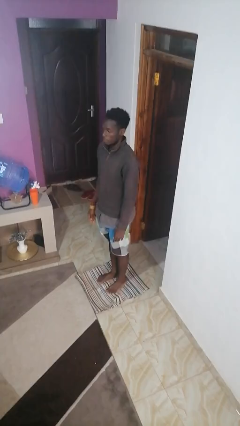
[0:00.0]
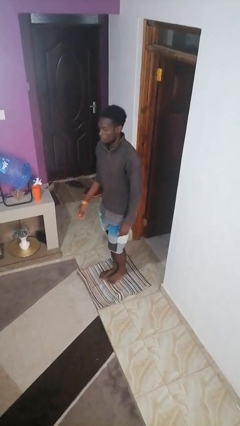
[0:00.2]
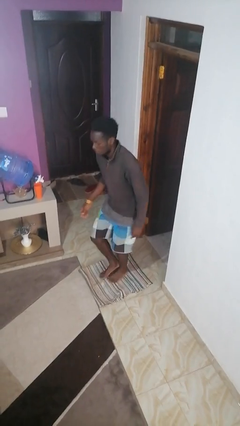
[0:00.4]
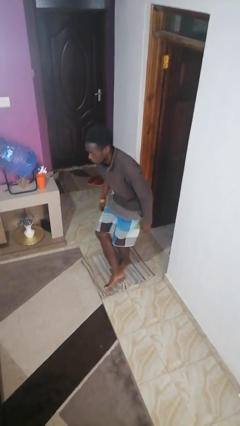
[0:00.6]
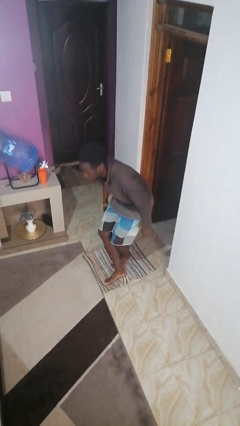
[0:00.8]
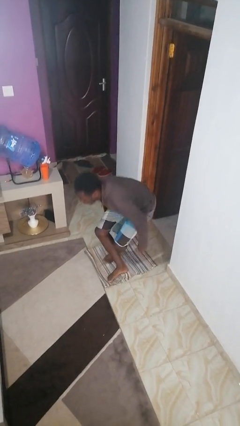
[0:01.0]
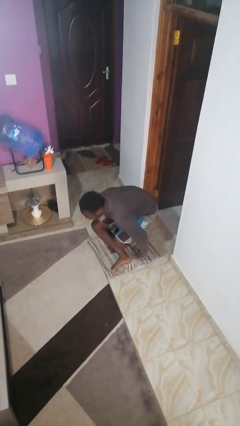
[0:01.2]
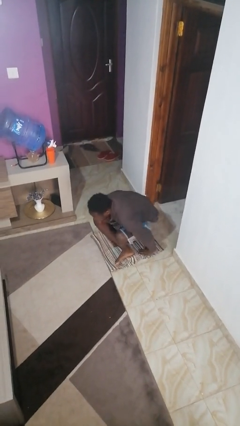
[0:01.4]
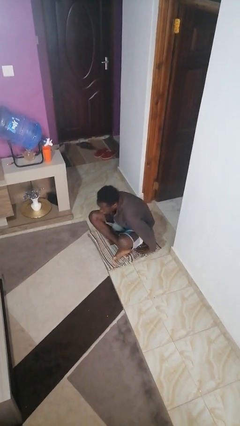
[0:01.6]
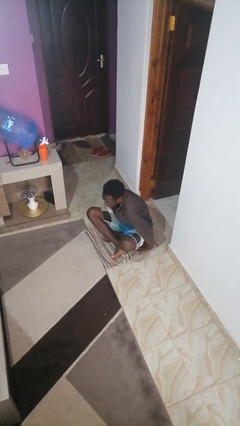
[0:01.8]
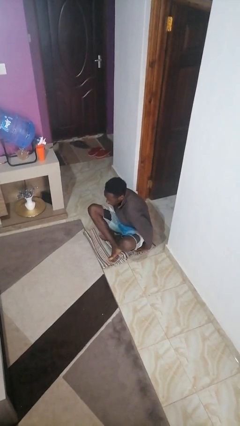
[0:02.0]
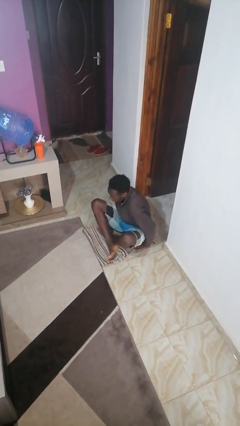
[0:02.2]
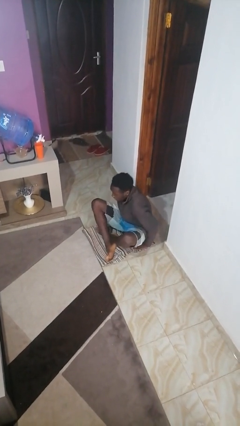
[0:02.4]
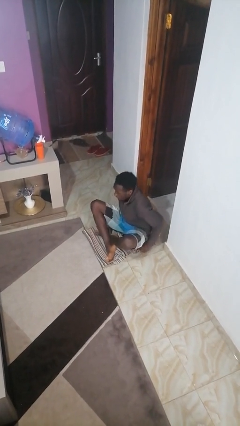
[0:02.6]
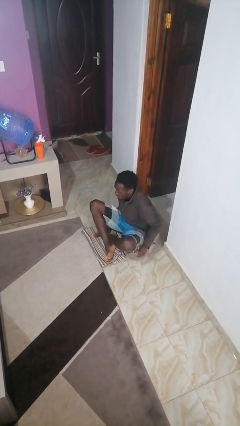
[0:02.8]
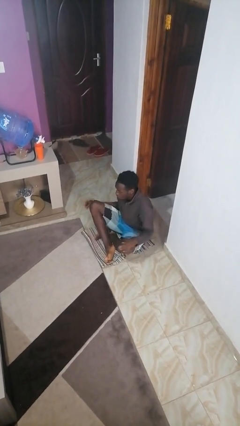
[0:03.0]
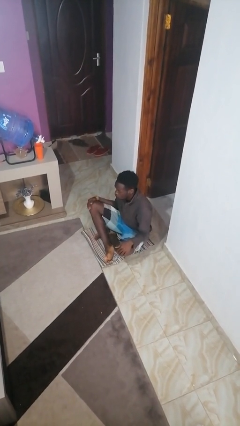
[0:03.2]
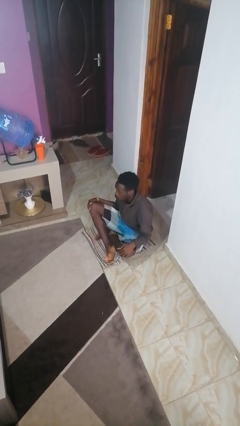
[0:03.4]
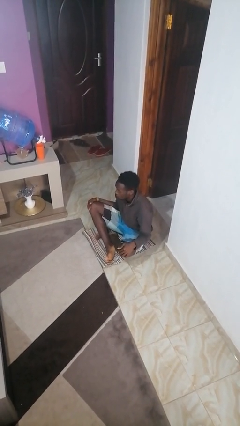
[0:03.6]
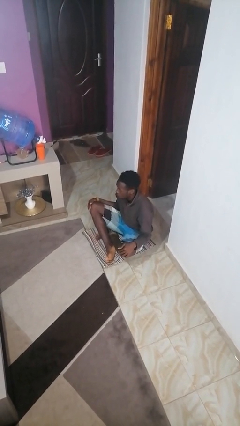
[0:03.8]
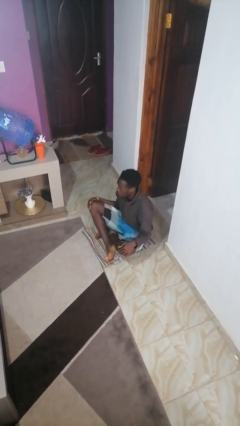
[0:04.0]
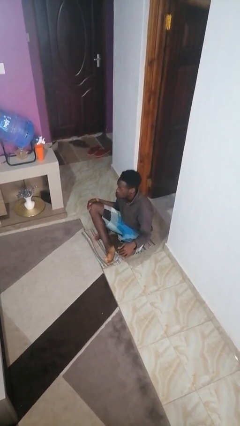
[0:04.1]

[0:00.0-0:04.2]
person sits crisscross

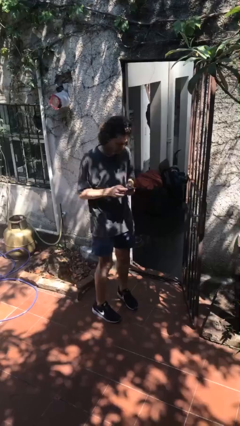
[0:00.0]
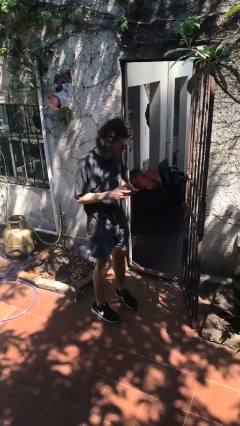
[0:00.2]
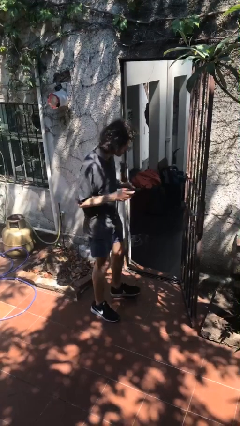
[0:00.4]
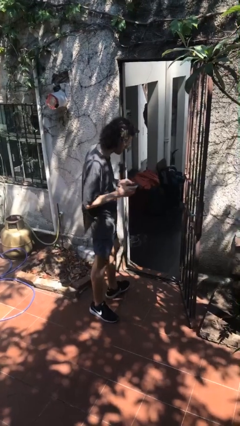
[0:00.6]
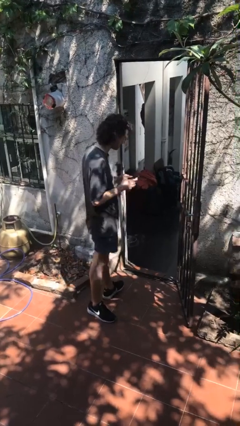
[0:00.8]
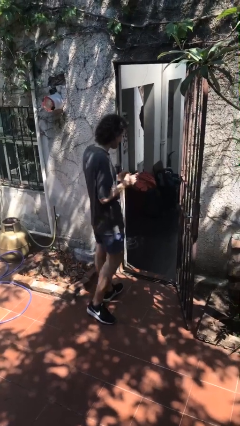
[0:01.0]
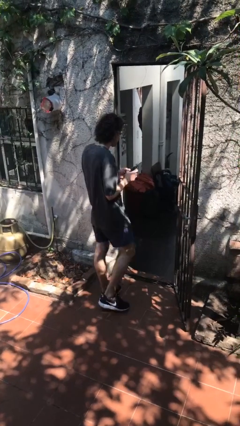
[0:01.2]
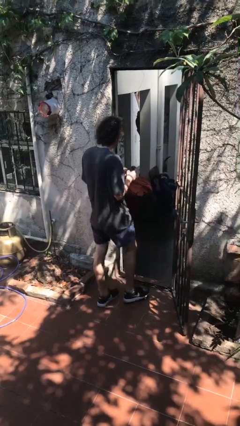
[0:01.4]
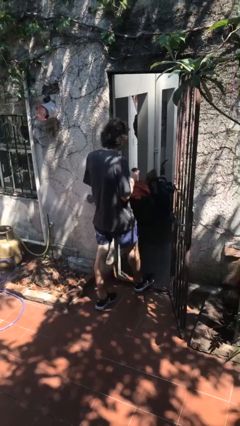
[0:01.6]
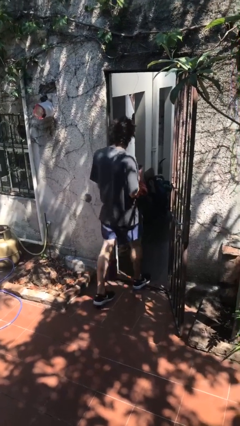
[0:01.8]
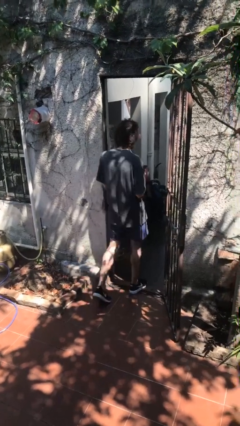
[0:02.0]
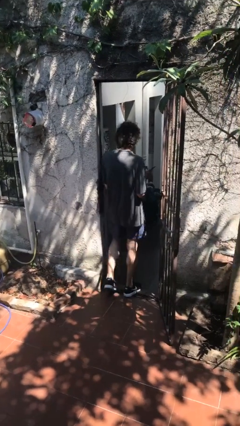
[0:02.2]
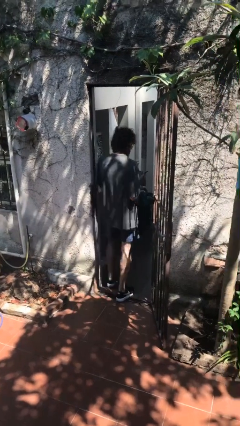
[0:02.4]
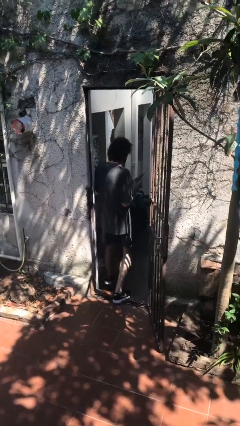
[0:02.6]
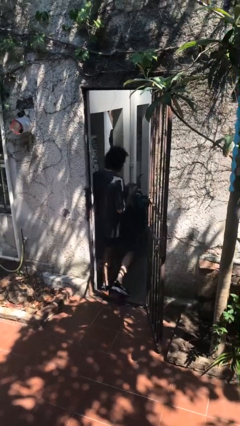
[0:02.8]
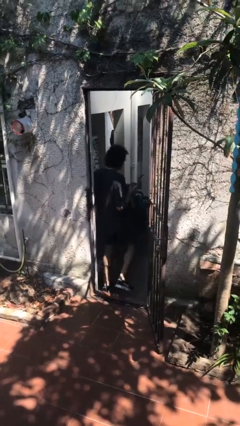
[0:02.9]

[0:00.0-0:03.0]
person exits scene through structure

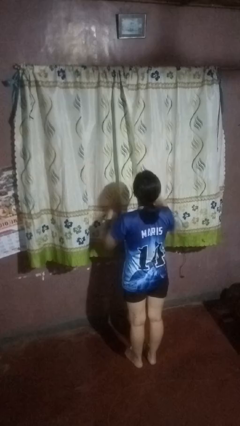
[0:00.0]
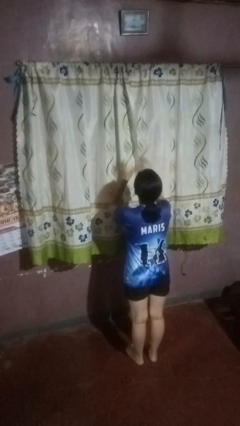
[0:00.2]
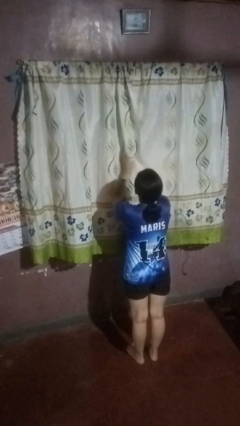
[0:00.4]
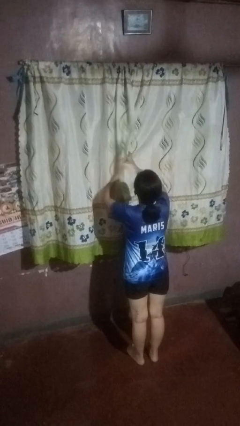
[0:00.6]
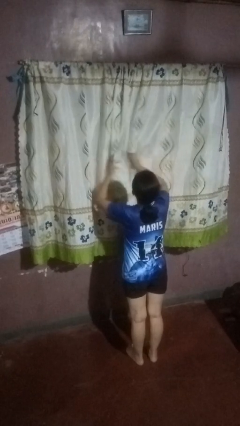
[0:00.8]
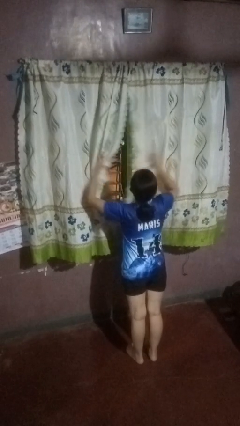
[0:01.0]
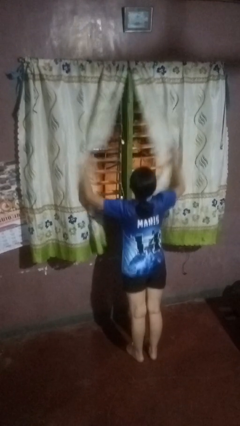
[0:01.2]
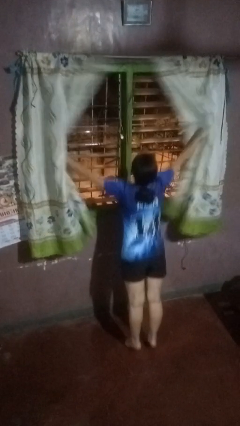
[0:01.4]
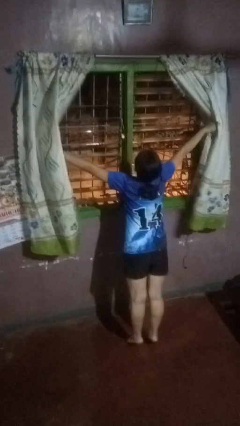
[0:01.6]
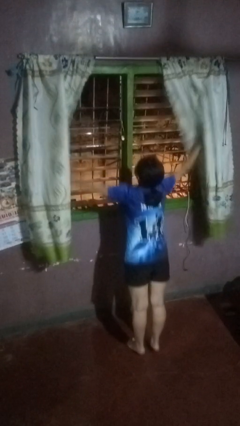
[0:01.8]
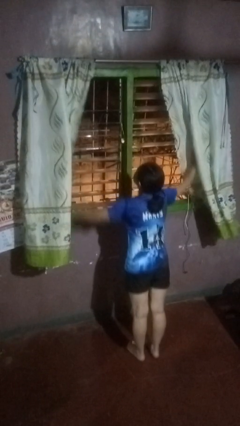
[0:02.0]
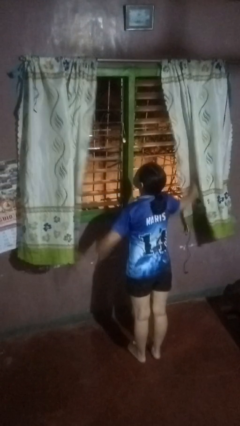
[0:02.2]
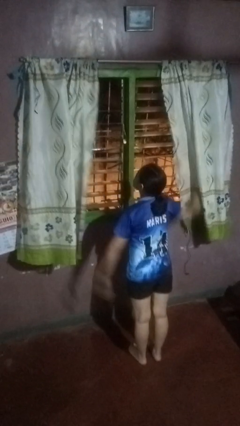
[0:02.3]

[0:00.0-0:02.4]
person opens curtains

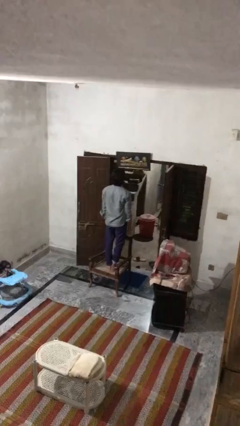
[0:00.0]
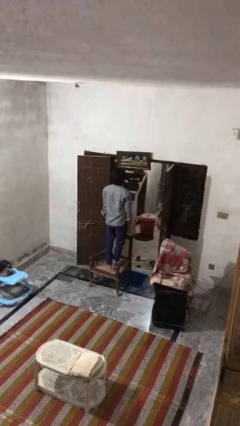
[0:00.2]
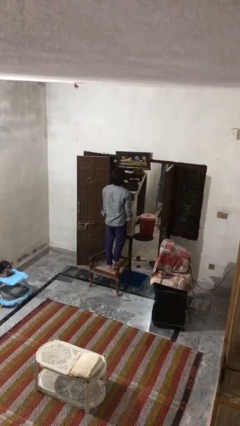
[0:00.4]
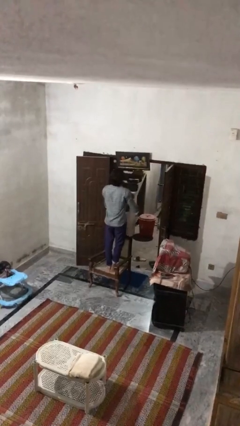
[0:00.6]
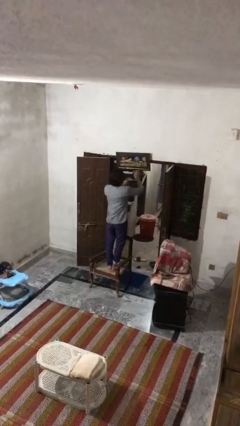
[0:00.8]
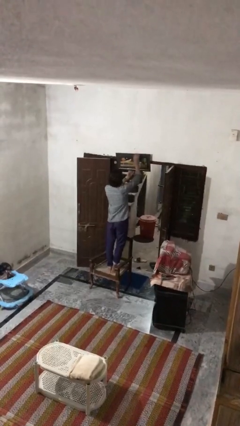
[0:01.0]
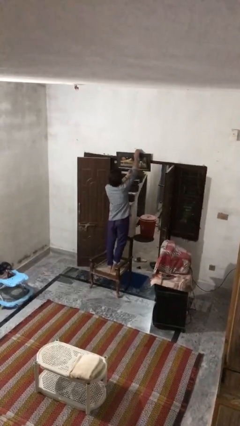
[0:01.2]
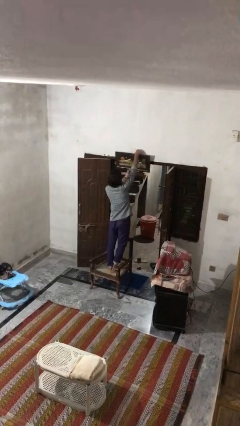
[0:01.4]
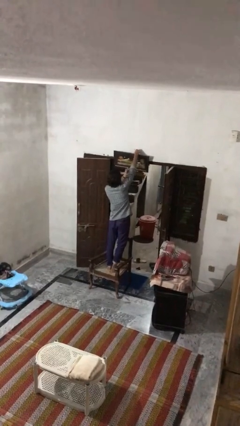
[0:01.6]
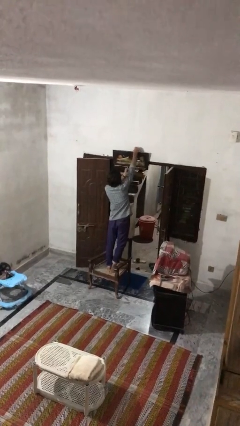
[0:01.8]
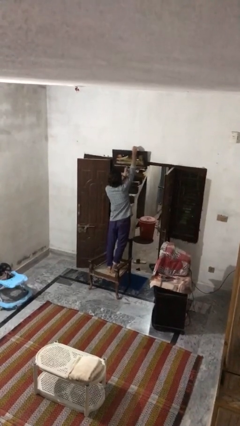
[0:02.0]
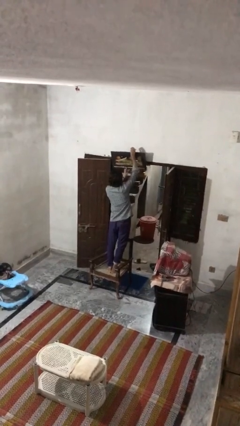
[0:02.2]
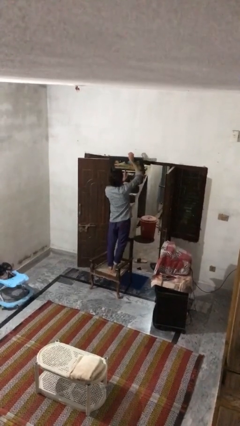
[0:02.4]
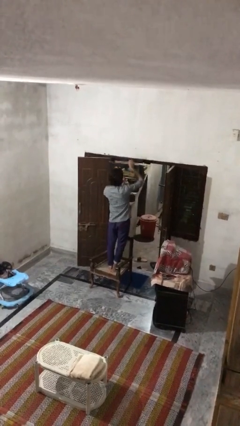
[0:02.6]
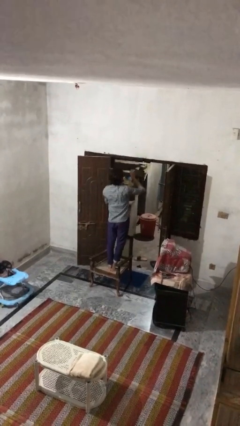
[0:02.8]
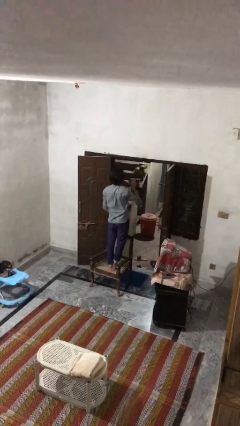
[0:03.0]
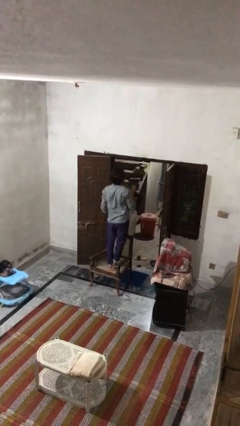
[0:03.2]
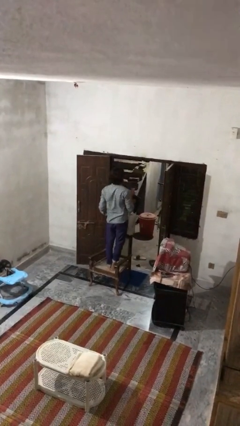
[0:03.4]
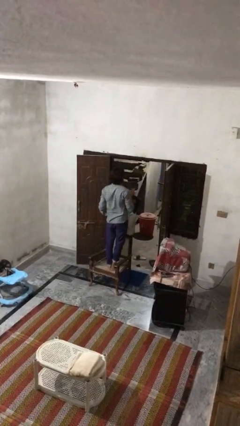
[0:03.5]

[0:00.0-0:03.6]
person takes down picture frame

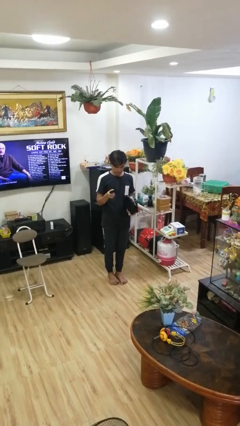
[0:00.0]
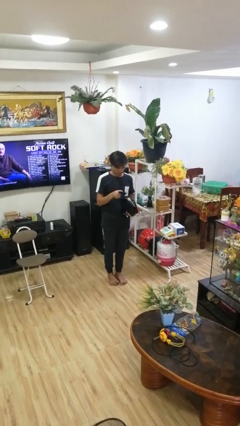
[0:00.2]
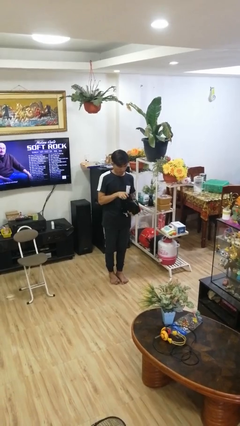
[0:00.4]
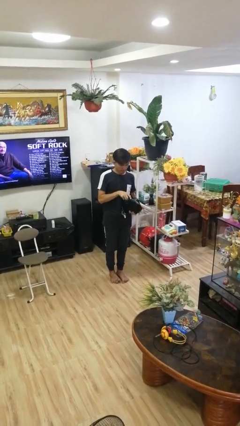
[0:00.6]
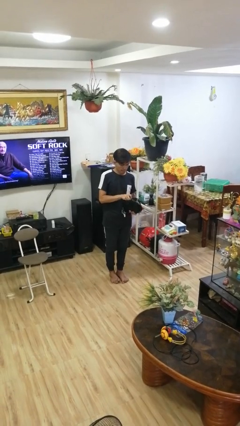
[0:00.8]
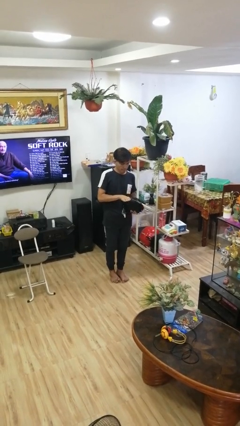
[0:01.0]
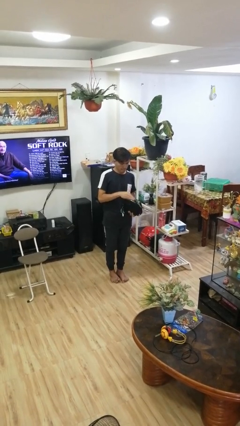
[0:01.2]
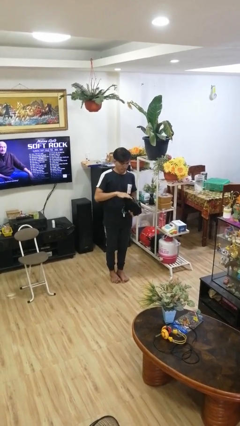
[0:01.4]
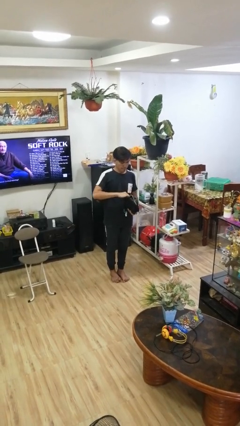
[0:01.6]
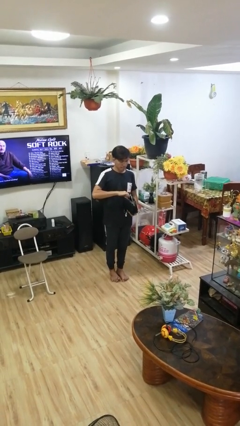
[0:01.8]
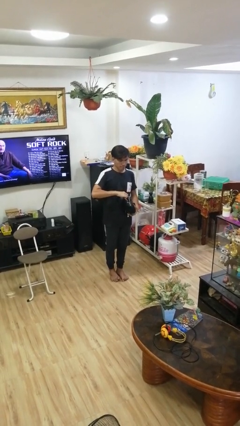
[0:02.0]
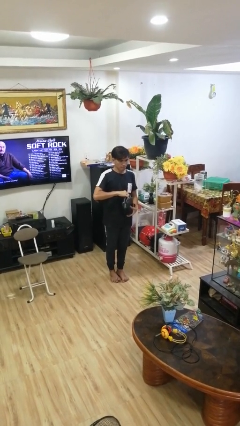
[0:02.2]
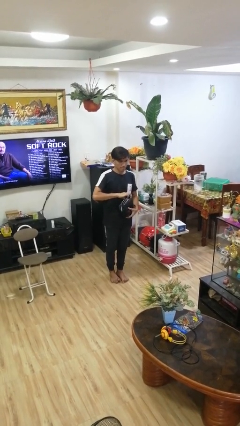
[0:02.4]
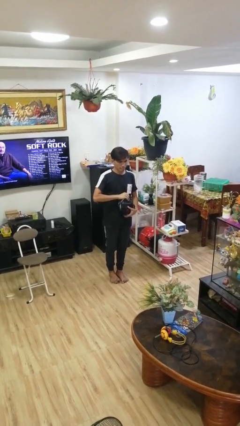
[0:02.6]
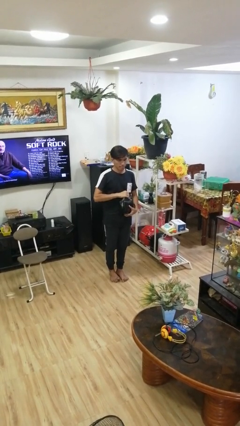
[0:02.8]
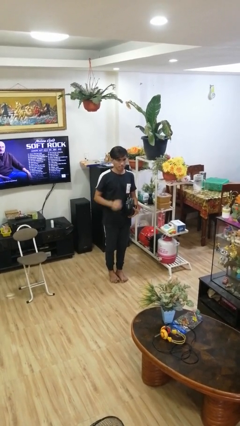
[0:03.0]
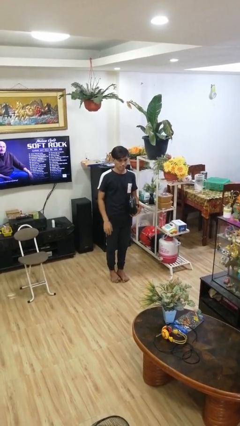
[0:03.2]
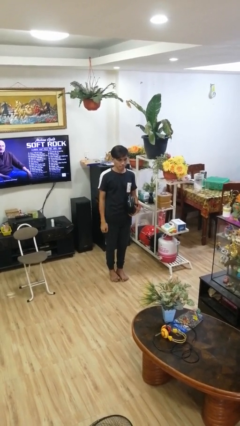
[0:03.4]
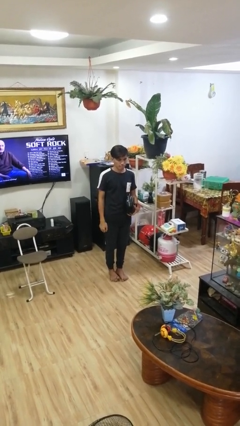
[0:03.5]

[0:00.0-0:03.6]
person puts object into purse

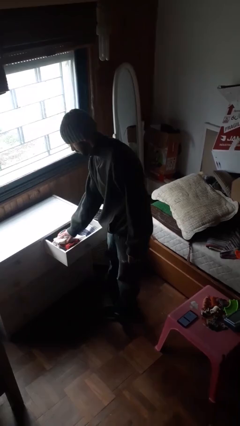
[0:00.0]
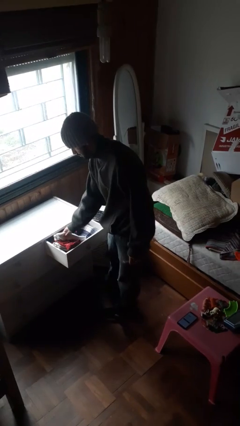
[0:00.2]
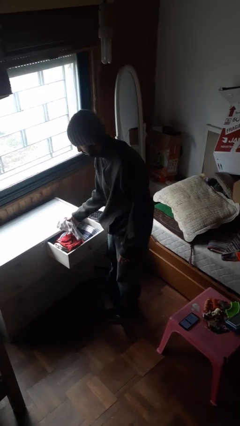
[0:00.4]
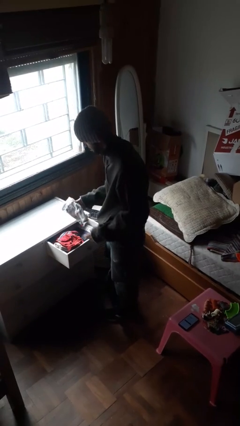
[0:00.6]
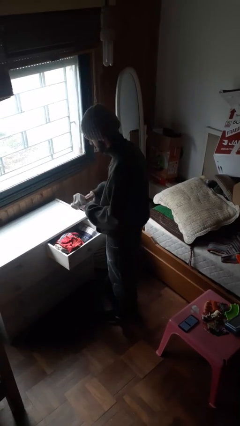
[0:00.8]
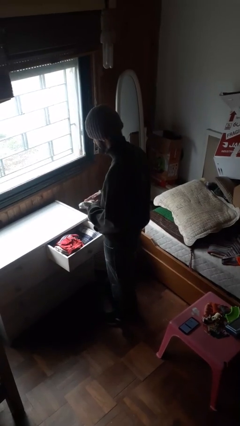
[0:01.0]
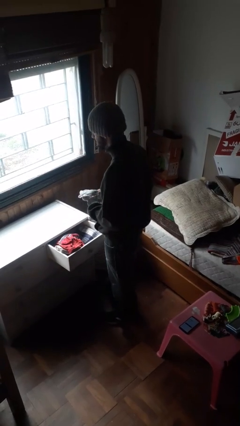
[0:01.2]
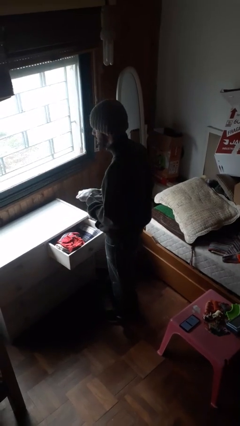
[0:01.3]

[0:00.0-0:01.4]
person takes clothes from dresser
